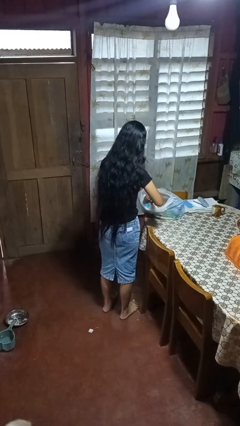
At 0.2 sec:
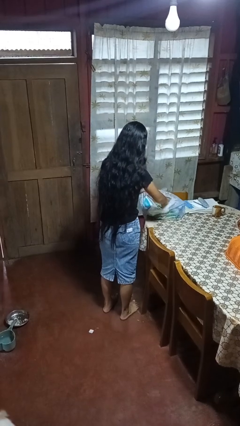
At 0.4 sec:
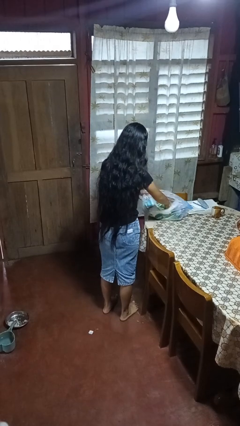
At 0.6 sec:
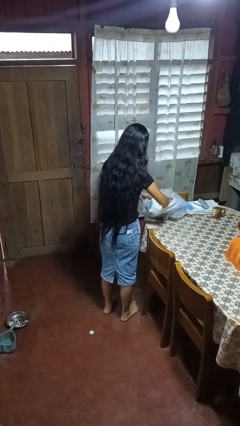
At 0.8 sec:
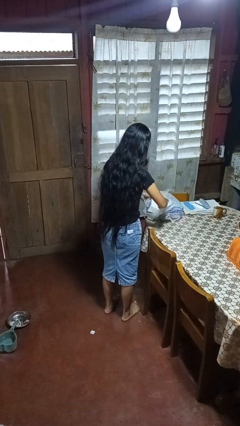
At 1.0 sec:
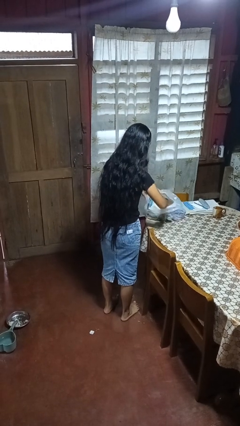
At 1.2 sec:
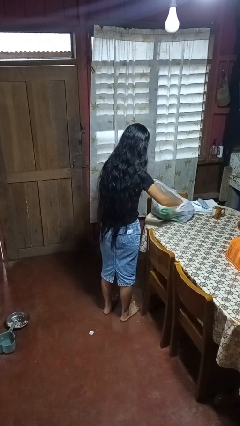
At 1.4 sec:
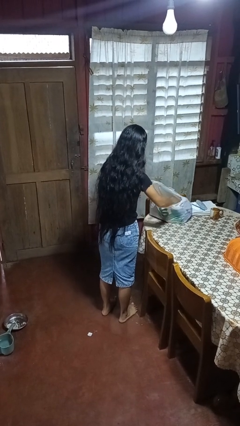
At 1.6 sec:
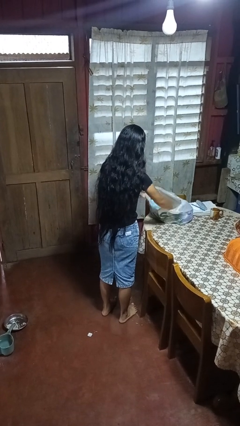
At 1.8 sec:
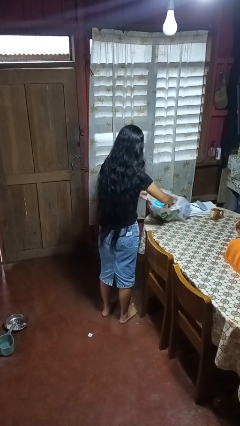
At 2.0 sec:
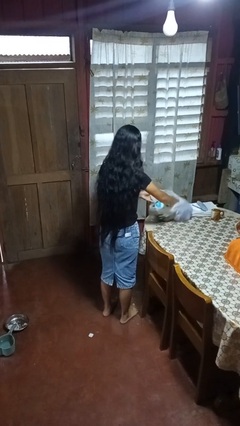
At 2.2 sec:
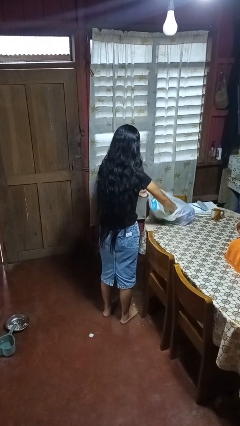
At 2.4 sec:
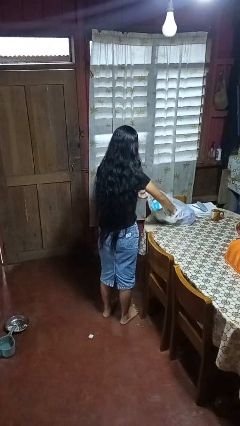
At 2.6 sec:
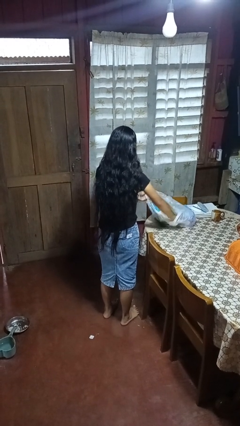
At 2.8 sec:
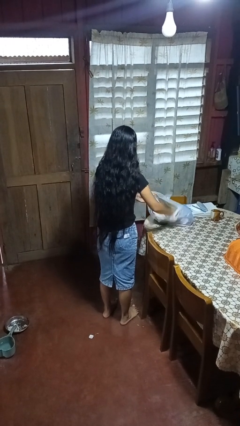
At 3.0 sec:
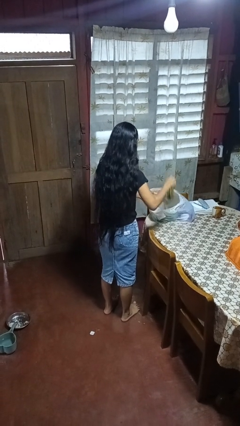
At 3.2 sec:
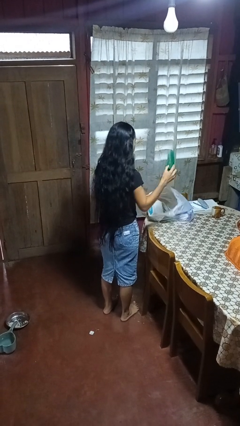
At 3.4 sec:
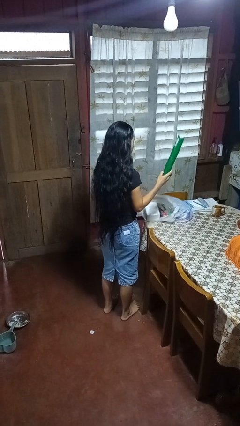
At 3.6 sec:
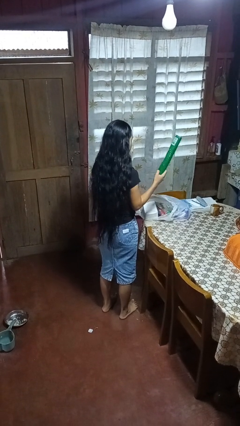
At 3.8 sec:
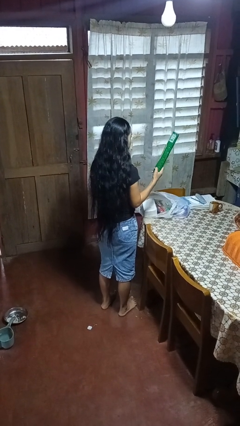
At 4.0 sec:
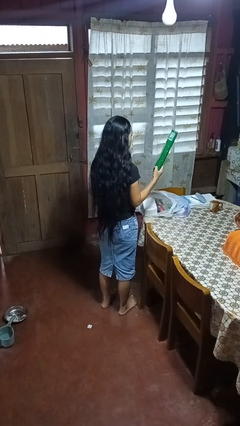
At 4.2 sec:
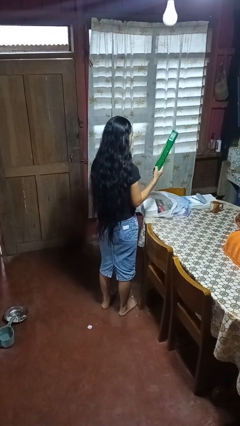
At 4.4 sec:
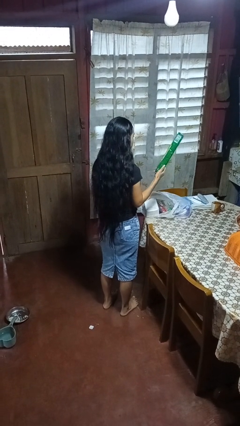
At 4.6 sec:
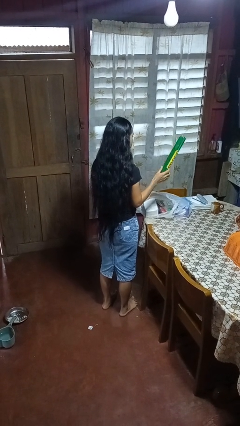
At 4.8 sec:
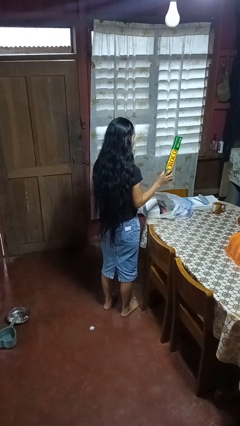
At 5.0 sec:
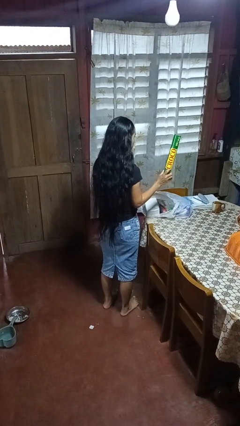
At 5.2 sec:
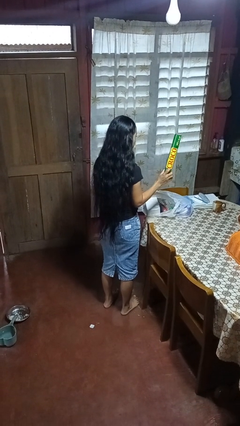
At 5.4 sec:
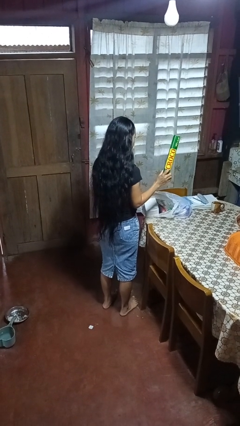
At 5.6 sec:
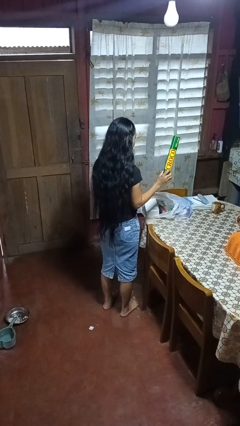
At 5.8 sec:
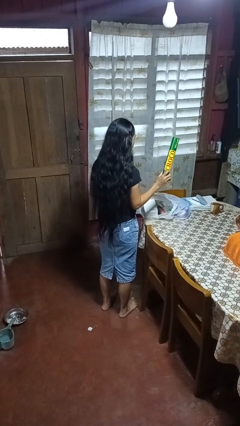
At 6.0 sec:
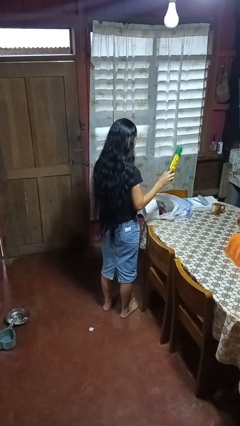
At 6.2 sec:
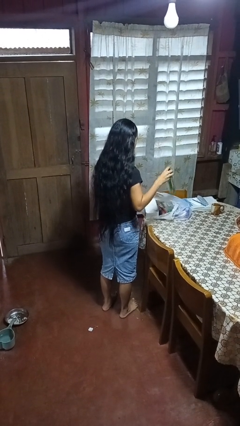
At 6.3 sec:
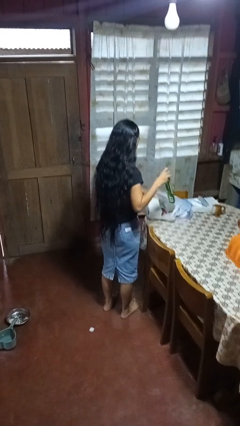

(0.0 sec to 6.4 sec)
person takes object from bag

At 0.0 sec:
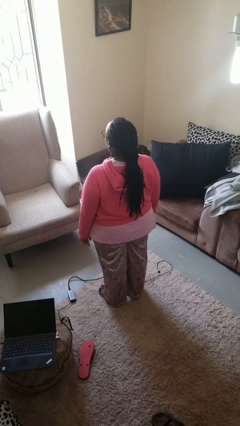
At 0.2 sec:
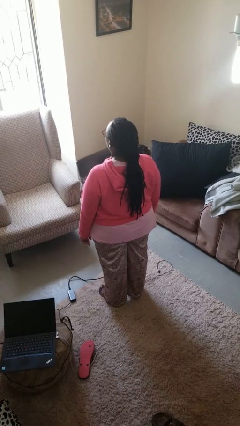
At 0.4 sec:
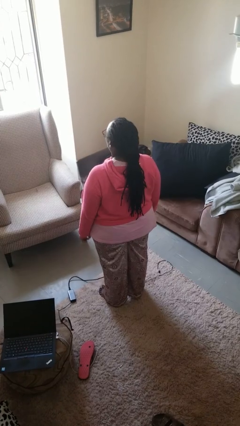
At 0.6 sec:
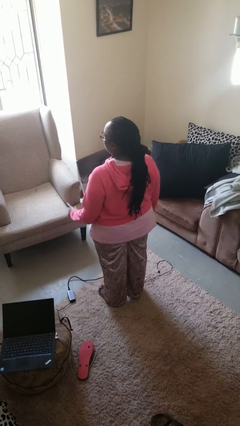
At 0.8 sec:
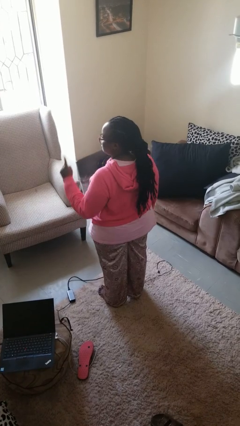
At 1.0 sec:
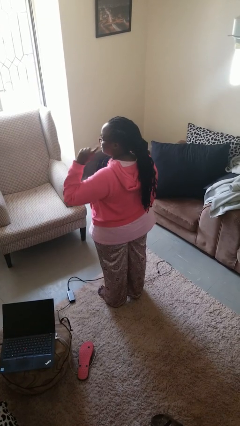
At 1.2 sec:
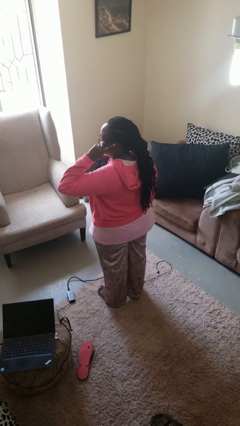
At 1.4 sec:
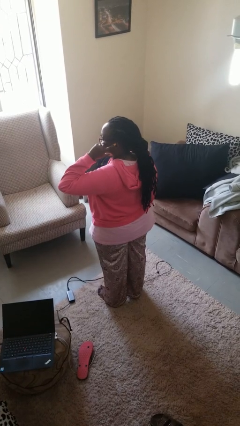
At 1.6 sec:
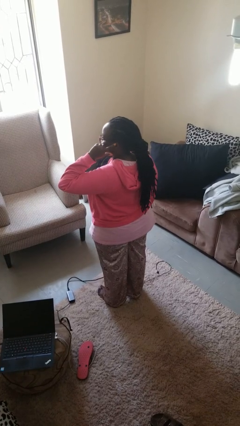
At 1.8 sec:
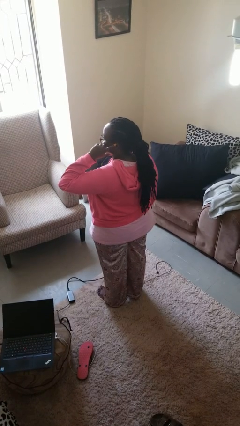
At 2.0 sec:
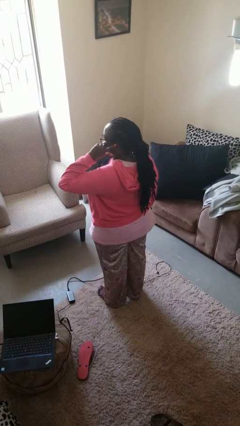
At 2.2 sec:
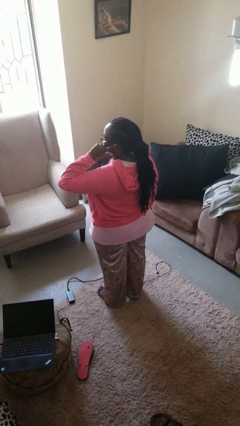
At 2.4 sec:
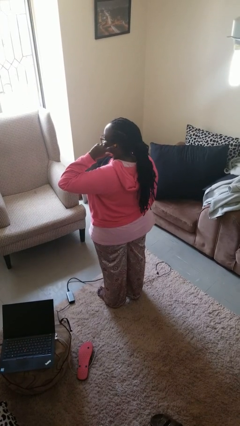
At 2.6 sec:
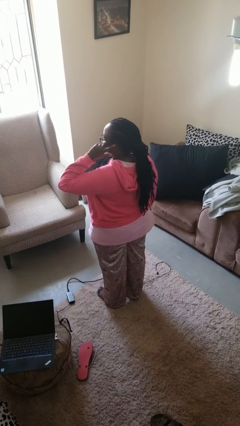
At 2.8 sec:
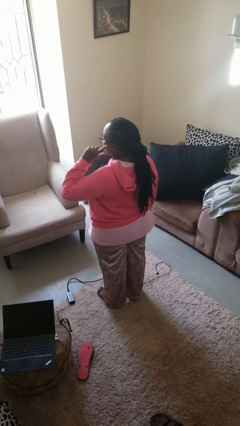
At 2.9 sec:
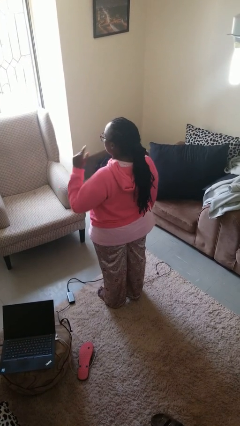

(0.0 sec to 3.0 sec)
person gestures listen closely

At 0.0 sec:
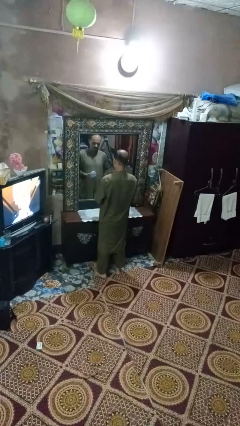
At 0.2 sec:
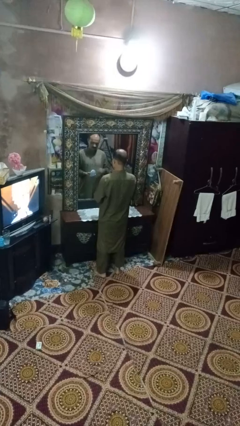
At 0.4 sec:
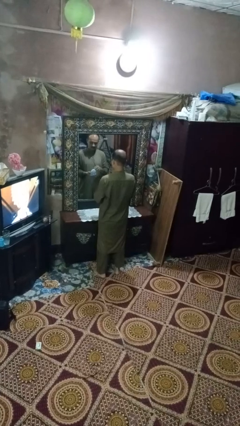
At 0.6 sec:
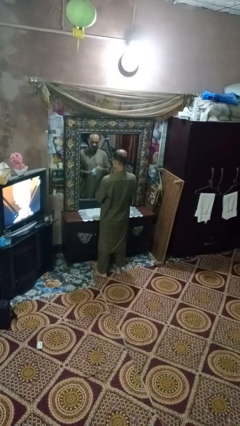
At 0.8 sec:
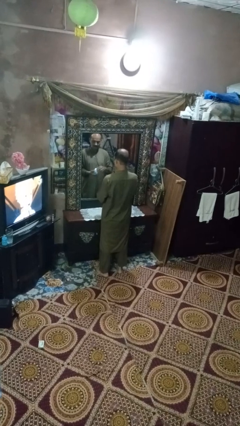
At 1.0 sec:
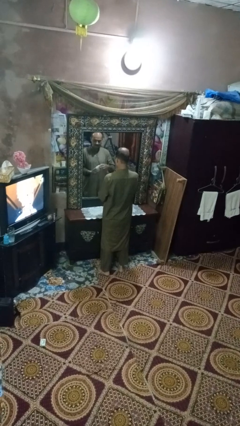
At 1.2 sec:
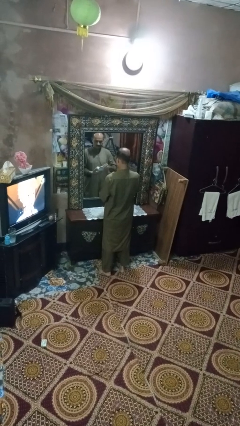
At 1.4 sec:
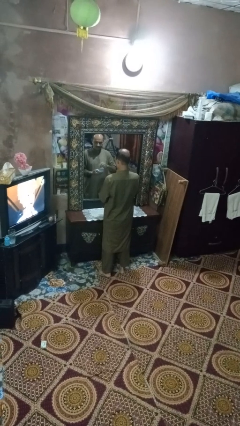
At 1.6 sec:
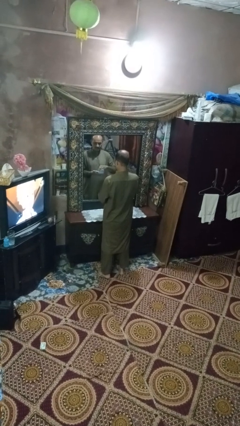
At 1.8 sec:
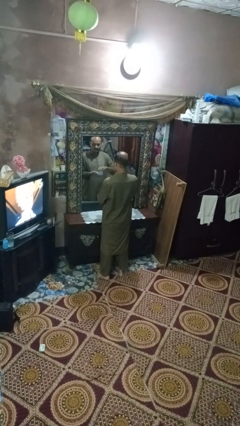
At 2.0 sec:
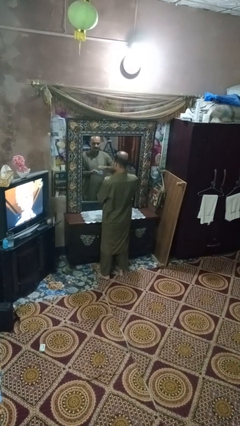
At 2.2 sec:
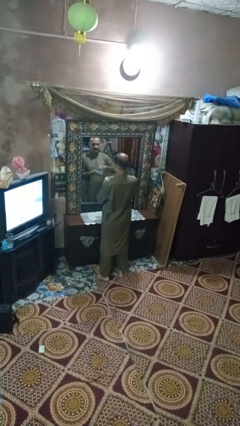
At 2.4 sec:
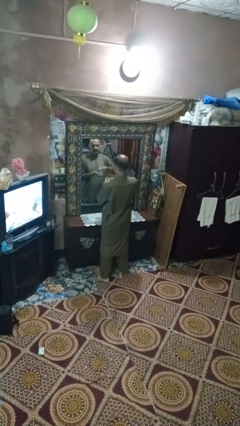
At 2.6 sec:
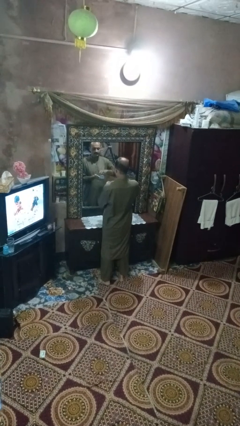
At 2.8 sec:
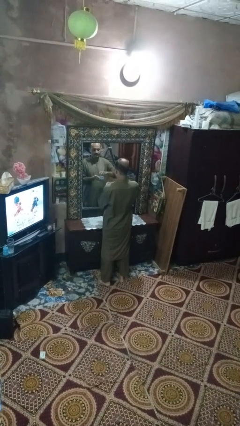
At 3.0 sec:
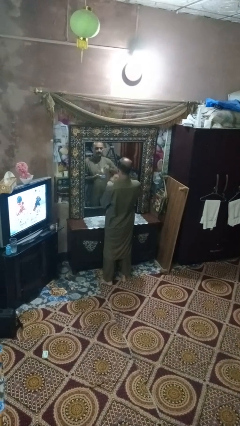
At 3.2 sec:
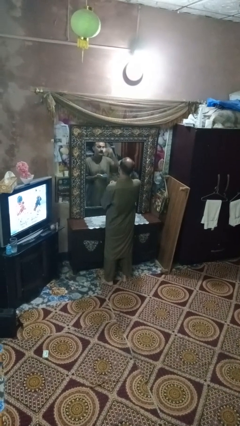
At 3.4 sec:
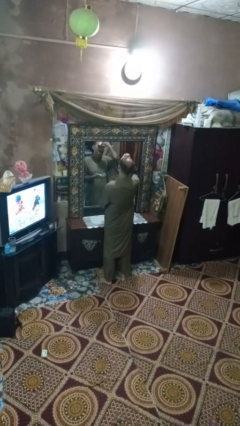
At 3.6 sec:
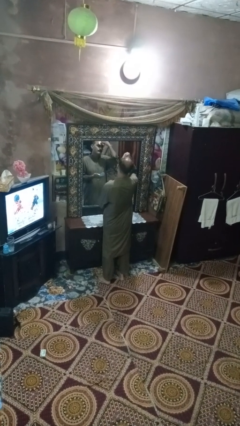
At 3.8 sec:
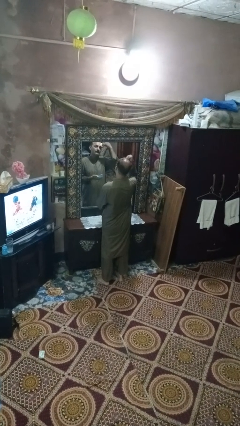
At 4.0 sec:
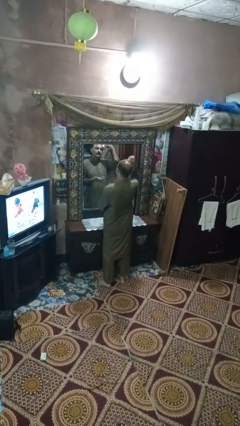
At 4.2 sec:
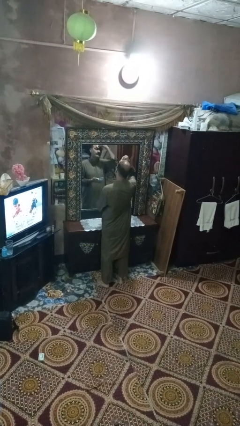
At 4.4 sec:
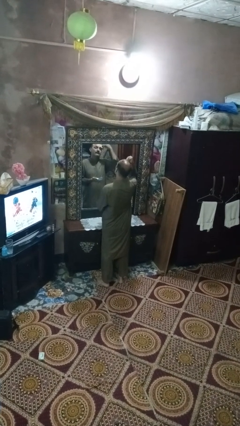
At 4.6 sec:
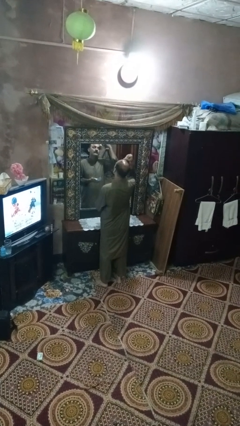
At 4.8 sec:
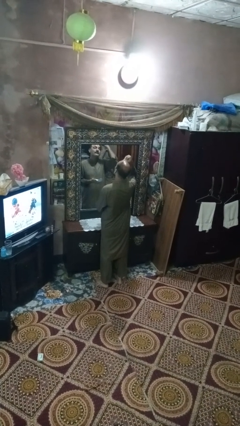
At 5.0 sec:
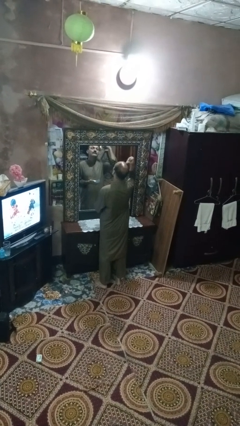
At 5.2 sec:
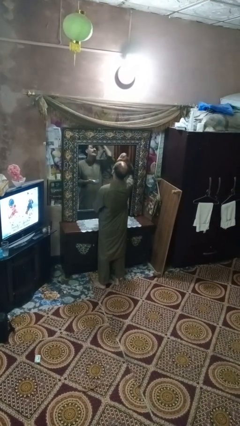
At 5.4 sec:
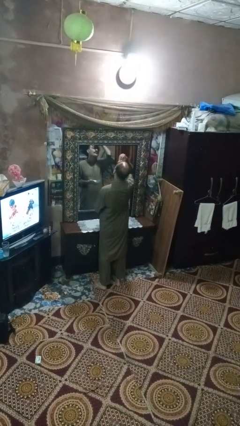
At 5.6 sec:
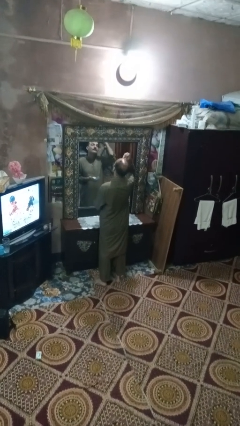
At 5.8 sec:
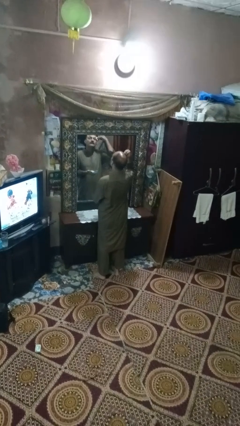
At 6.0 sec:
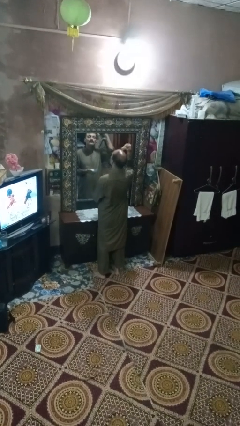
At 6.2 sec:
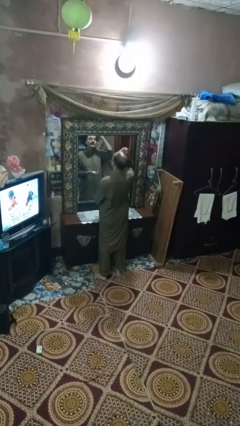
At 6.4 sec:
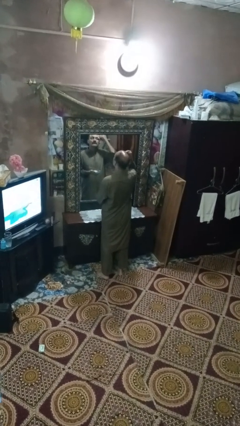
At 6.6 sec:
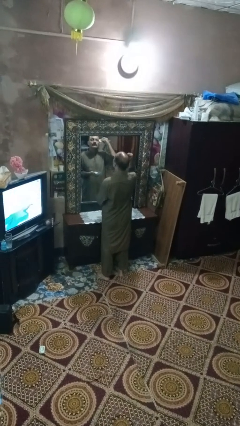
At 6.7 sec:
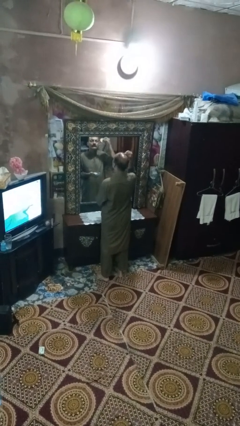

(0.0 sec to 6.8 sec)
person applies foundation makeup

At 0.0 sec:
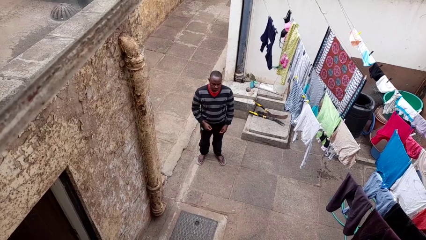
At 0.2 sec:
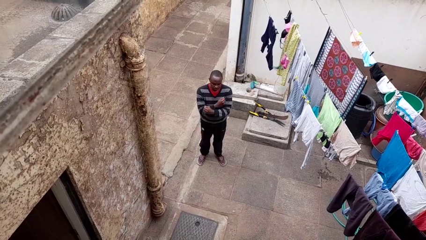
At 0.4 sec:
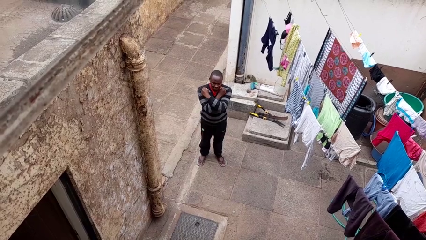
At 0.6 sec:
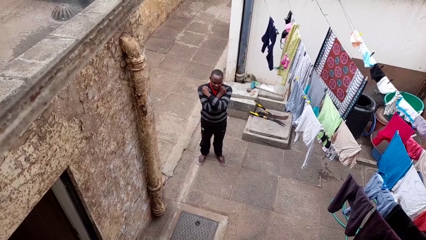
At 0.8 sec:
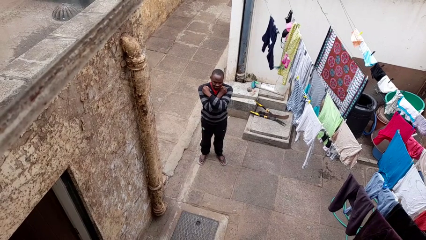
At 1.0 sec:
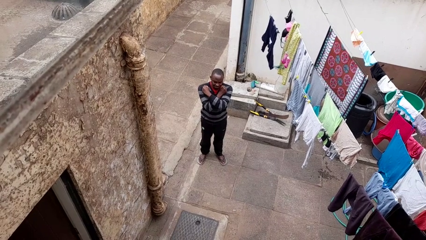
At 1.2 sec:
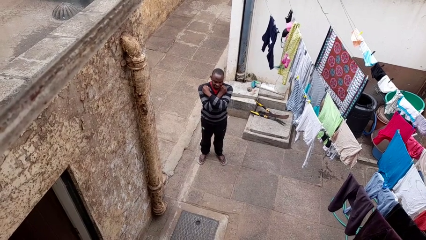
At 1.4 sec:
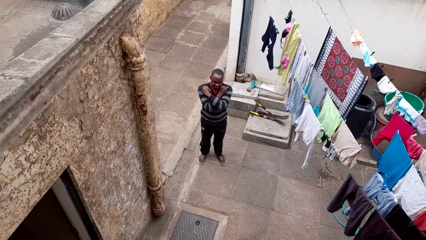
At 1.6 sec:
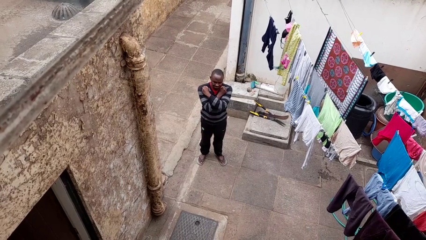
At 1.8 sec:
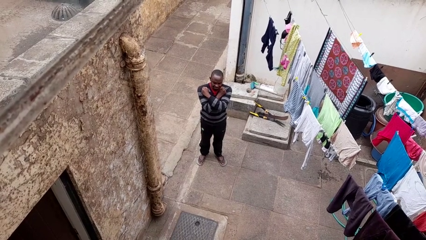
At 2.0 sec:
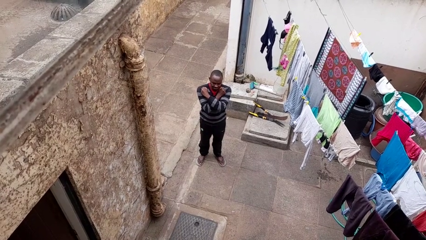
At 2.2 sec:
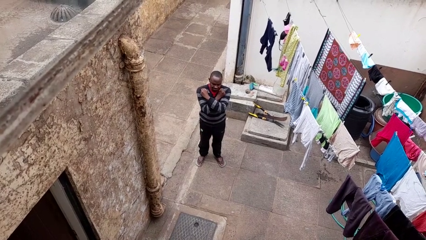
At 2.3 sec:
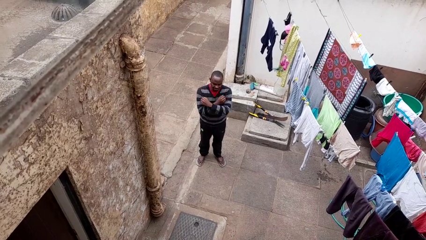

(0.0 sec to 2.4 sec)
person gestures arms x
